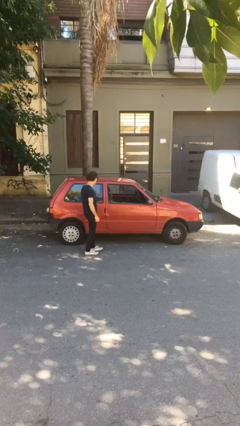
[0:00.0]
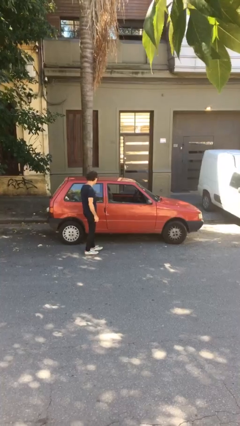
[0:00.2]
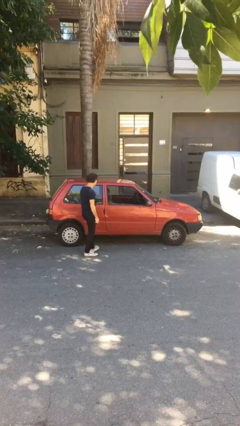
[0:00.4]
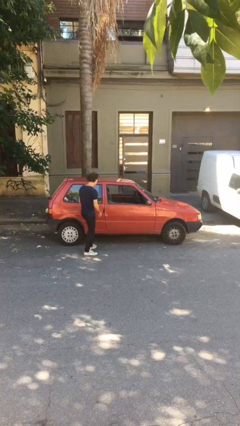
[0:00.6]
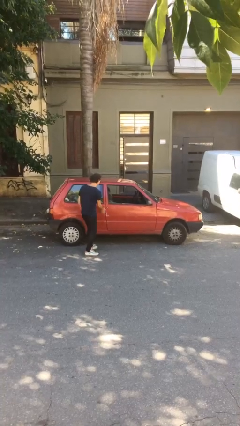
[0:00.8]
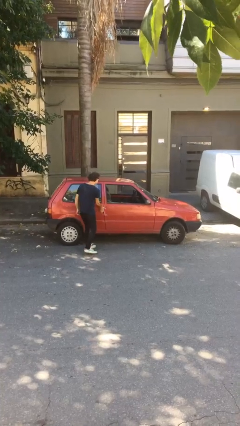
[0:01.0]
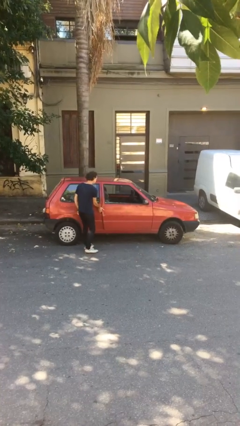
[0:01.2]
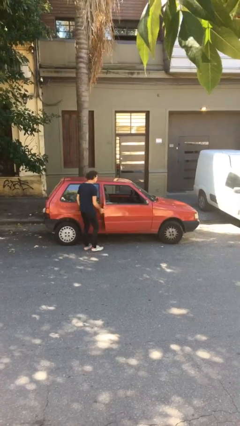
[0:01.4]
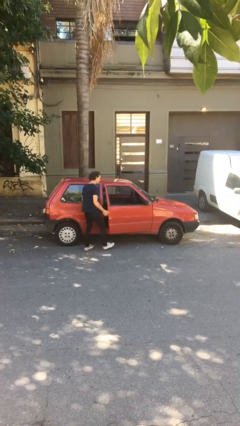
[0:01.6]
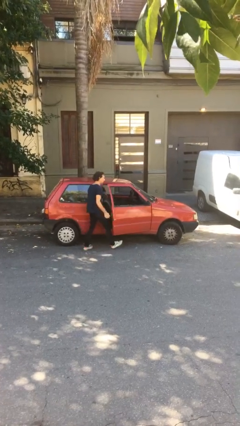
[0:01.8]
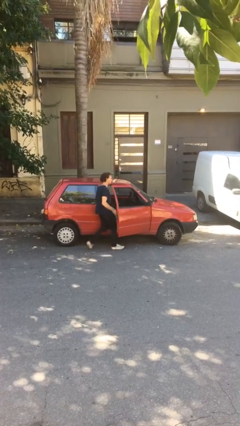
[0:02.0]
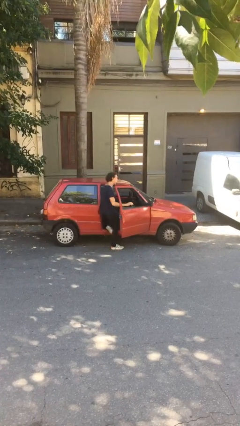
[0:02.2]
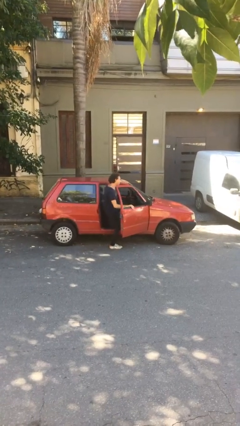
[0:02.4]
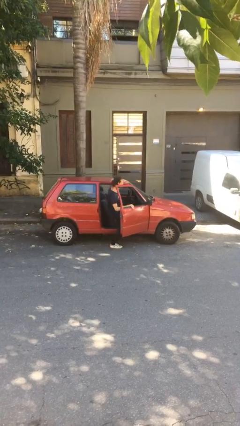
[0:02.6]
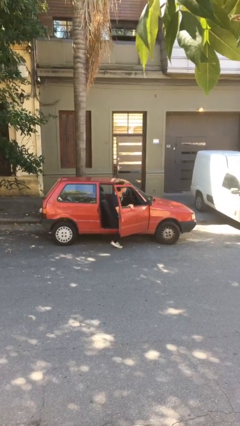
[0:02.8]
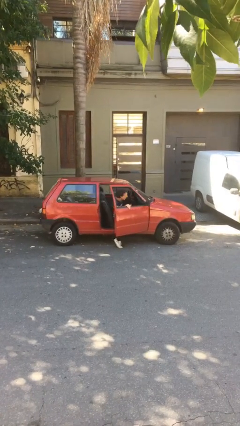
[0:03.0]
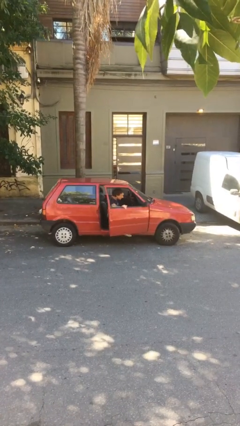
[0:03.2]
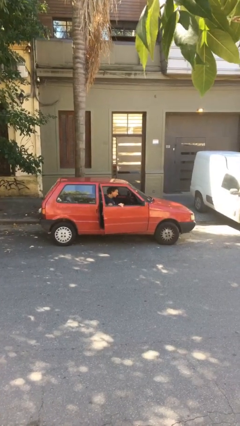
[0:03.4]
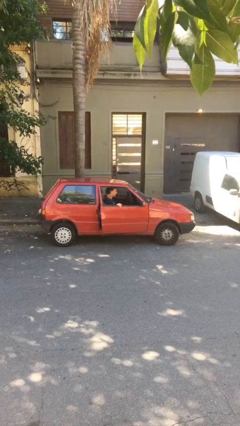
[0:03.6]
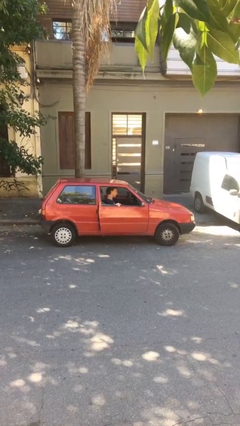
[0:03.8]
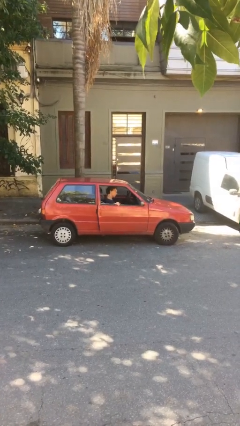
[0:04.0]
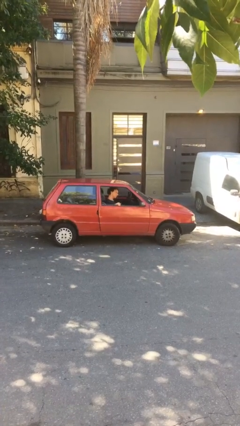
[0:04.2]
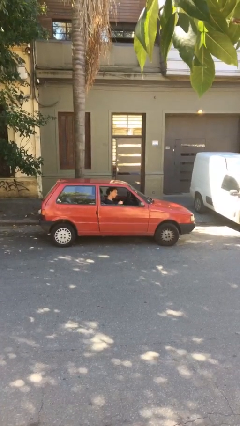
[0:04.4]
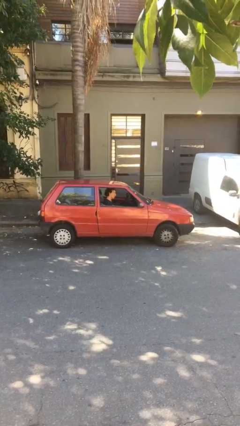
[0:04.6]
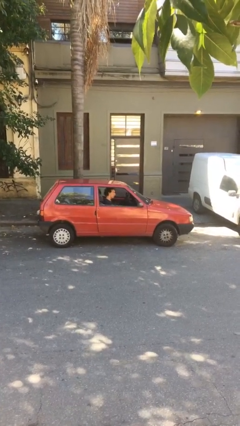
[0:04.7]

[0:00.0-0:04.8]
car picks up person

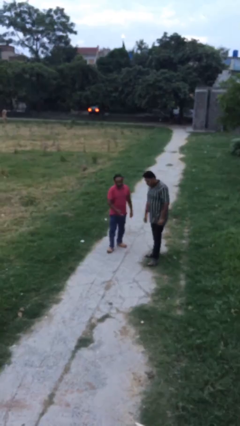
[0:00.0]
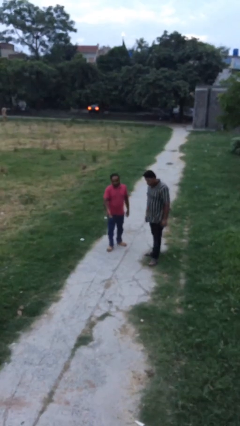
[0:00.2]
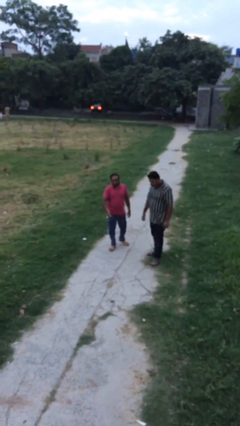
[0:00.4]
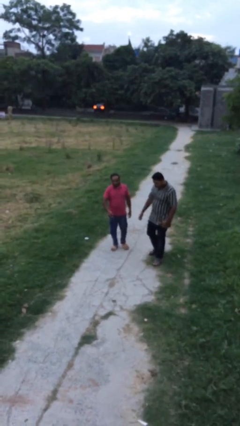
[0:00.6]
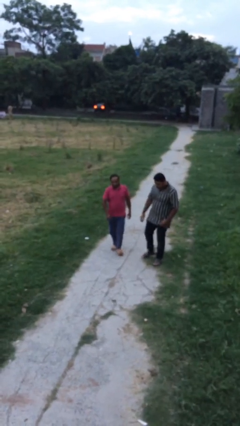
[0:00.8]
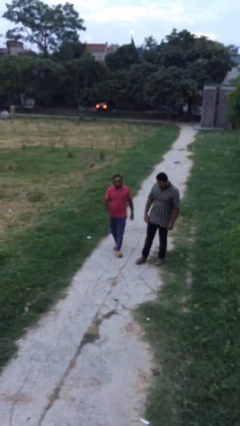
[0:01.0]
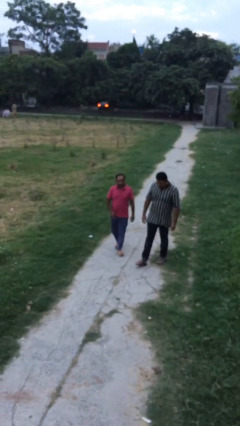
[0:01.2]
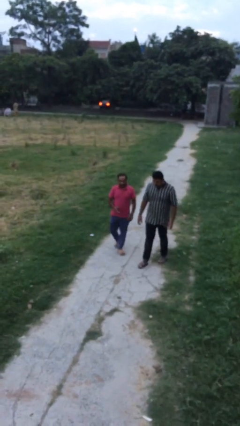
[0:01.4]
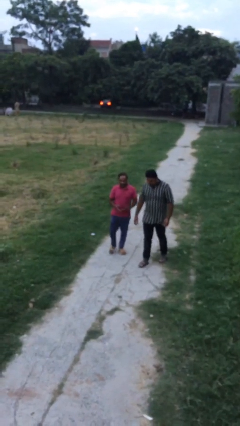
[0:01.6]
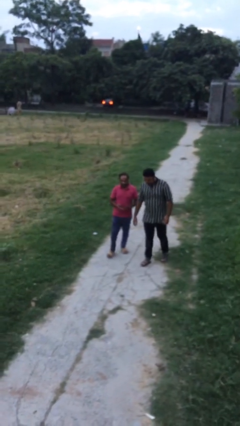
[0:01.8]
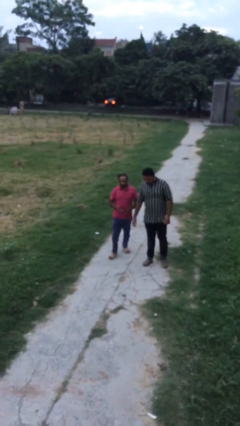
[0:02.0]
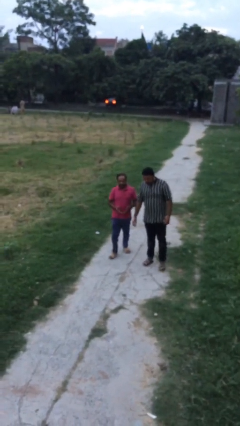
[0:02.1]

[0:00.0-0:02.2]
person talks to person

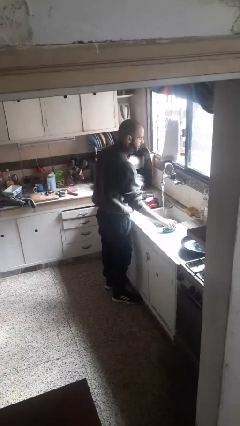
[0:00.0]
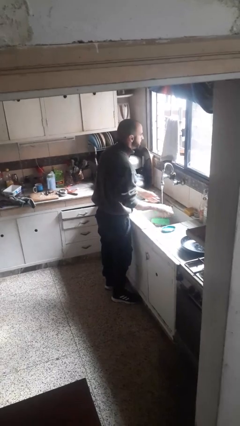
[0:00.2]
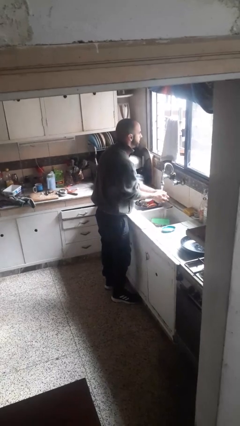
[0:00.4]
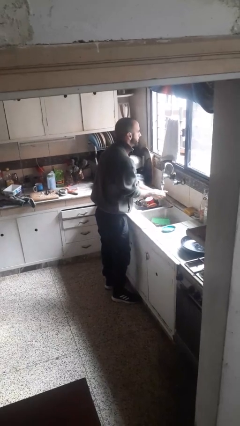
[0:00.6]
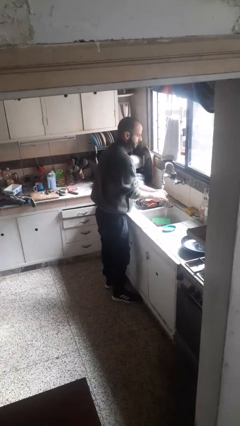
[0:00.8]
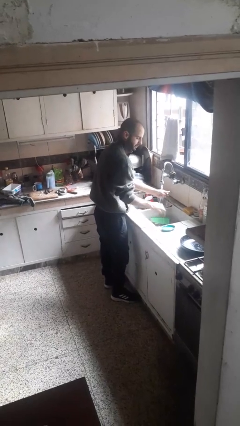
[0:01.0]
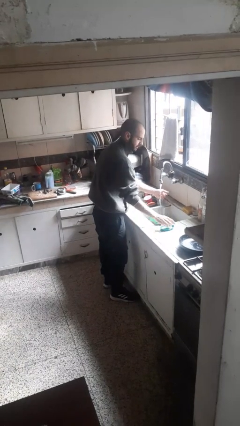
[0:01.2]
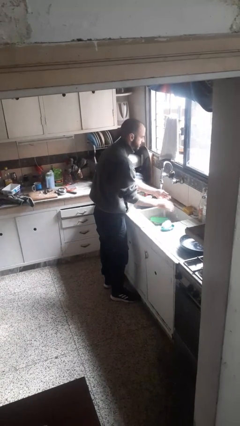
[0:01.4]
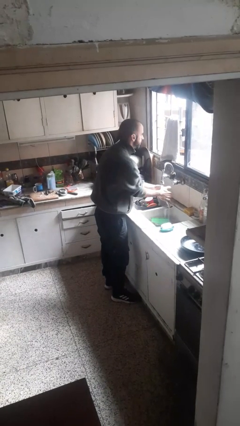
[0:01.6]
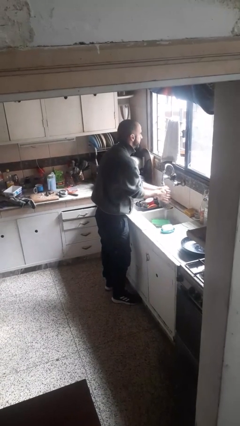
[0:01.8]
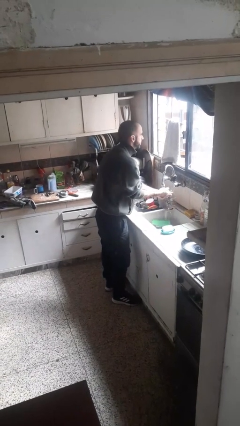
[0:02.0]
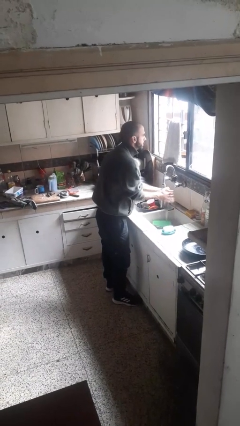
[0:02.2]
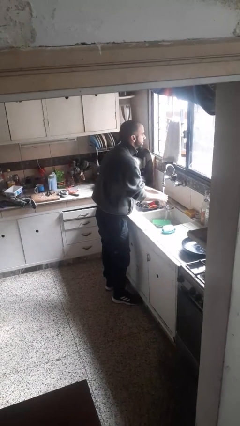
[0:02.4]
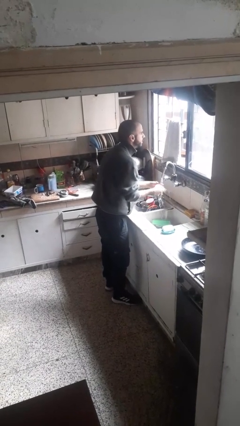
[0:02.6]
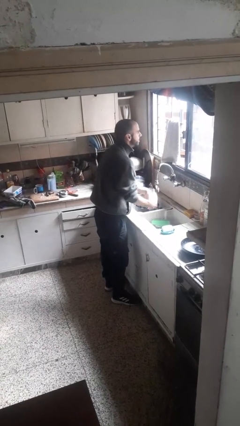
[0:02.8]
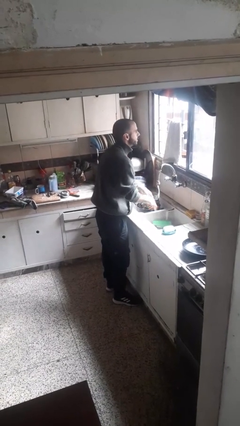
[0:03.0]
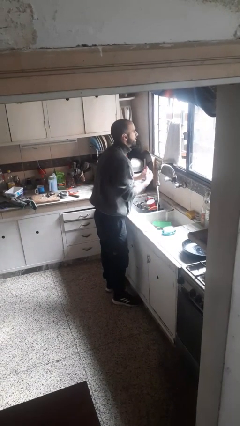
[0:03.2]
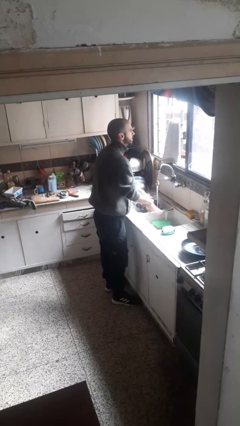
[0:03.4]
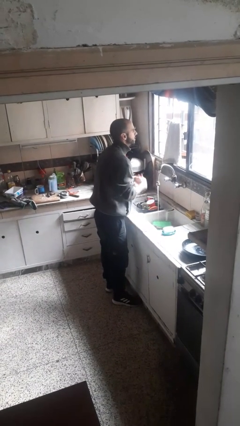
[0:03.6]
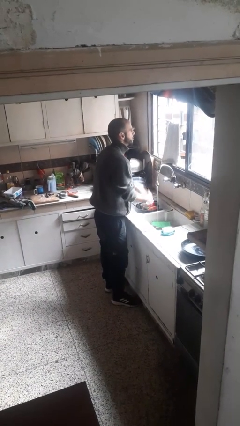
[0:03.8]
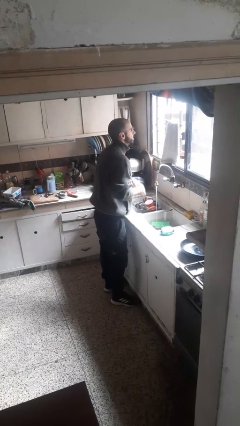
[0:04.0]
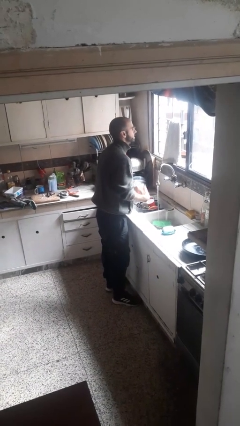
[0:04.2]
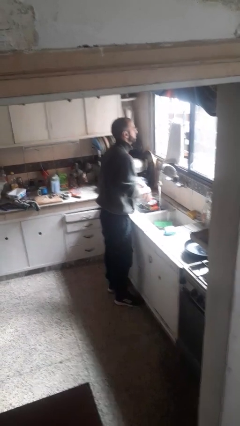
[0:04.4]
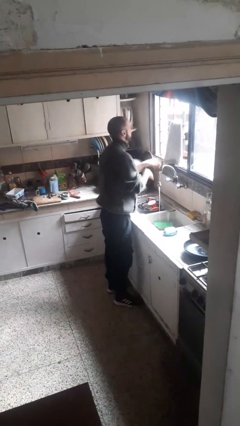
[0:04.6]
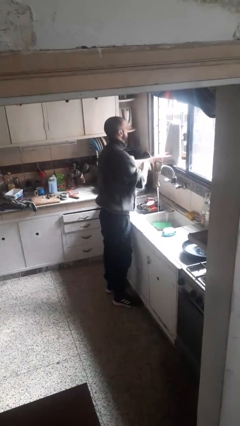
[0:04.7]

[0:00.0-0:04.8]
person washes hands

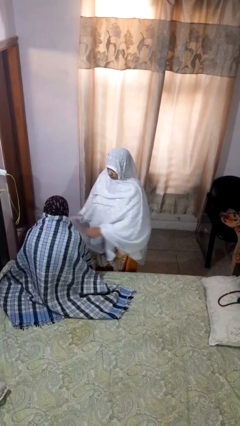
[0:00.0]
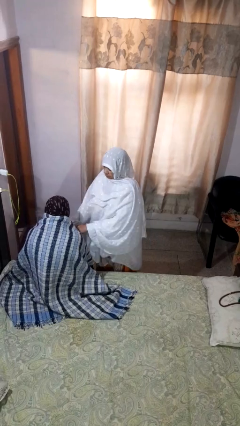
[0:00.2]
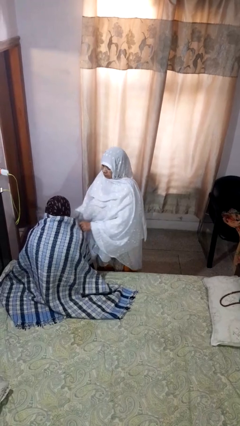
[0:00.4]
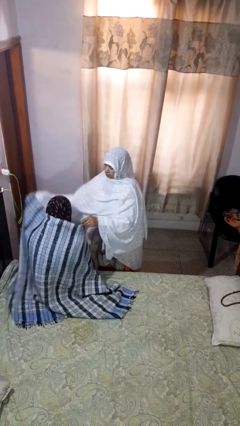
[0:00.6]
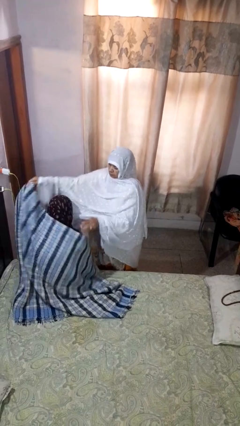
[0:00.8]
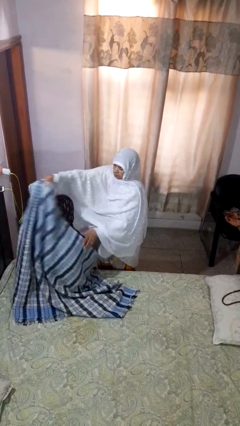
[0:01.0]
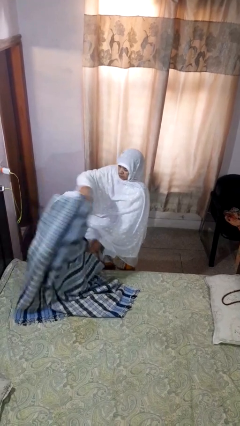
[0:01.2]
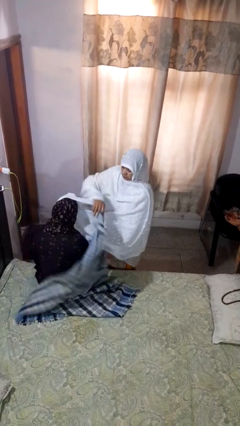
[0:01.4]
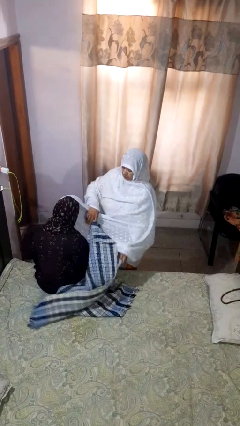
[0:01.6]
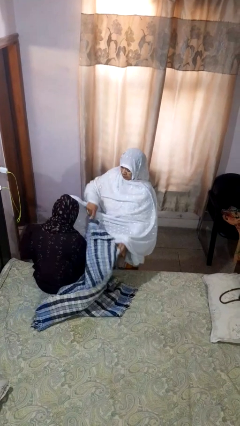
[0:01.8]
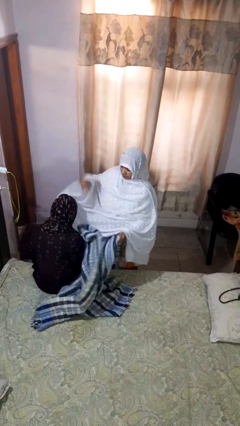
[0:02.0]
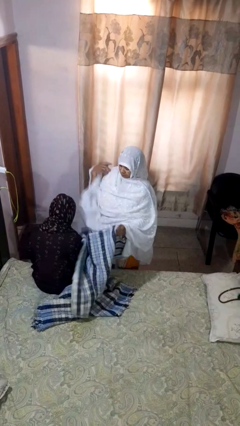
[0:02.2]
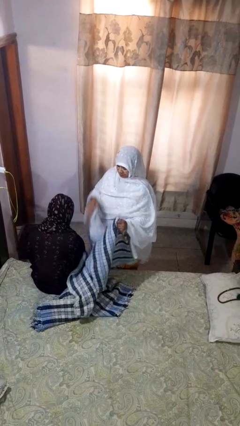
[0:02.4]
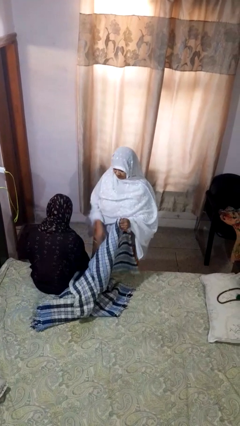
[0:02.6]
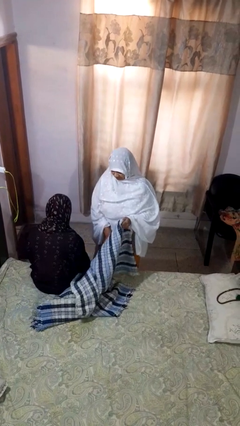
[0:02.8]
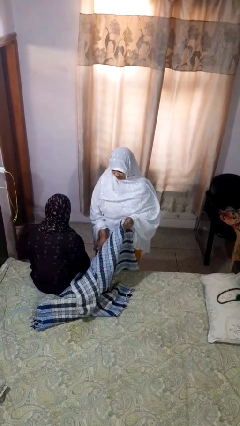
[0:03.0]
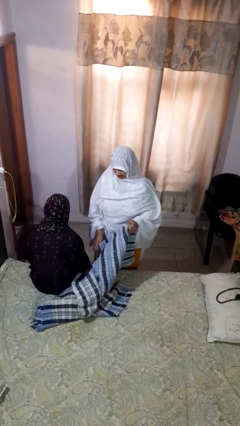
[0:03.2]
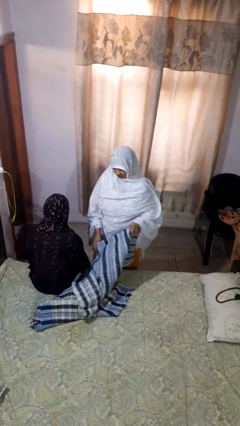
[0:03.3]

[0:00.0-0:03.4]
person uncovers friend with blanket

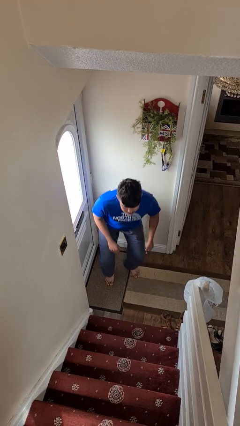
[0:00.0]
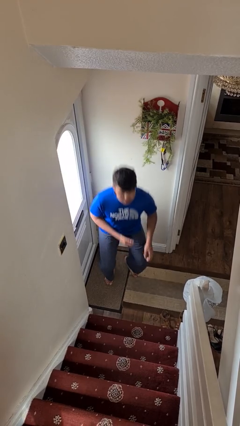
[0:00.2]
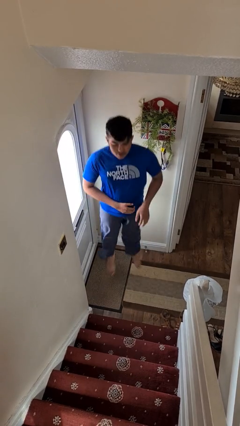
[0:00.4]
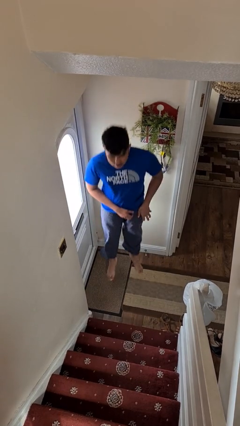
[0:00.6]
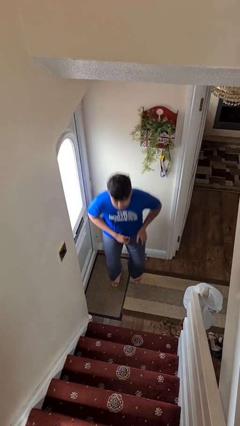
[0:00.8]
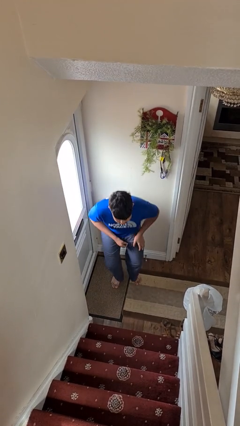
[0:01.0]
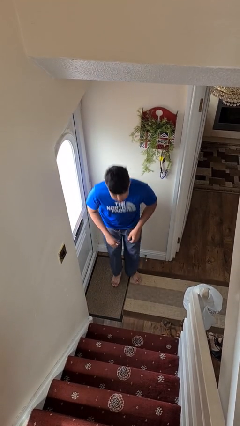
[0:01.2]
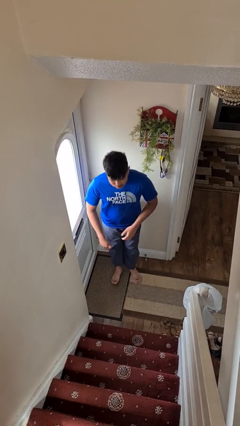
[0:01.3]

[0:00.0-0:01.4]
person jumps

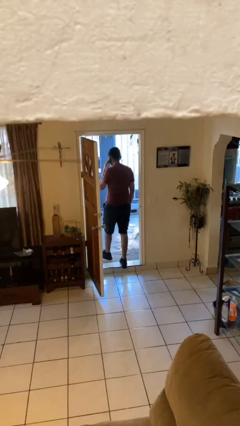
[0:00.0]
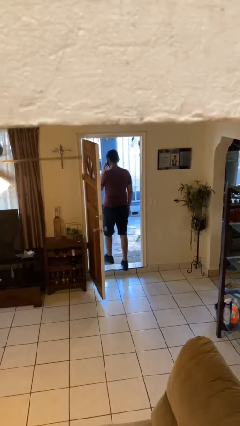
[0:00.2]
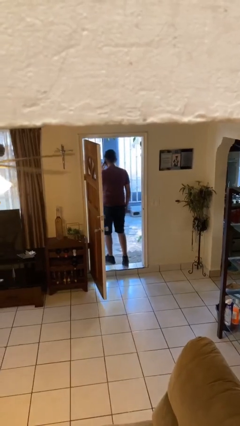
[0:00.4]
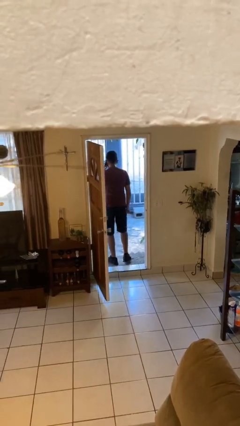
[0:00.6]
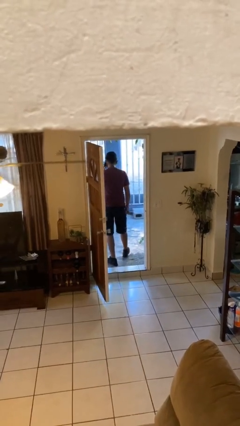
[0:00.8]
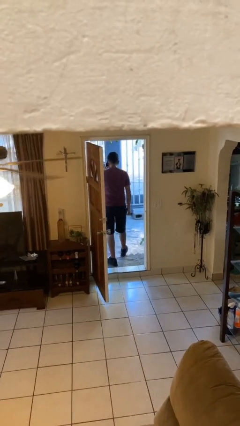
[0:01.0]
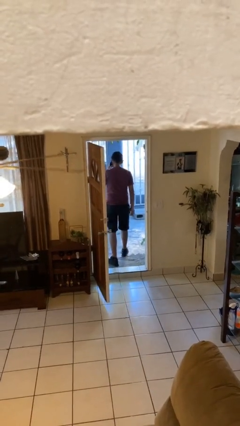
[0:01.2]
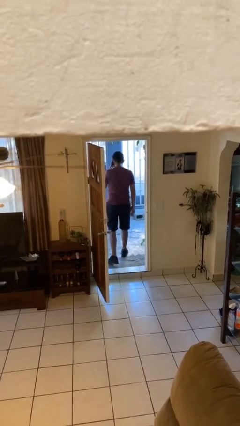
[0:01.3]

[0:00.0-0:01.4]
person exits scene through structure
